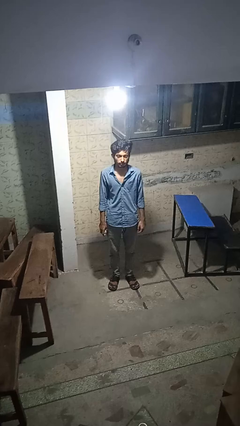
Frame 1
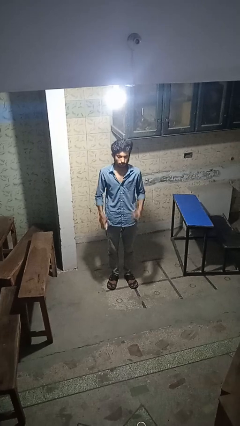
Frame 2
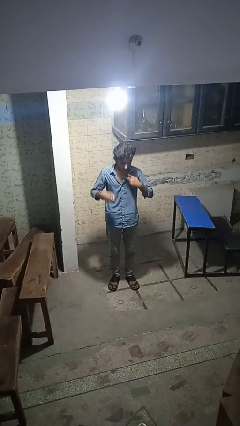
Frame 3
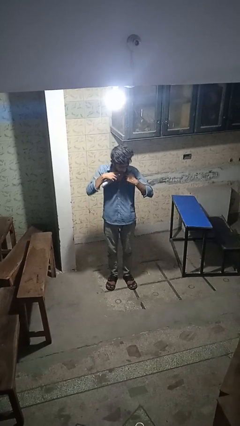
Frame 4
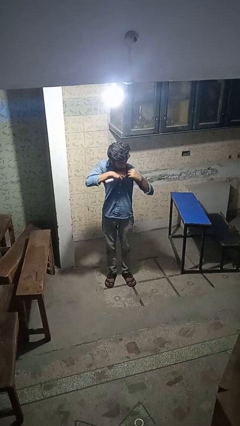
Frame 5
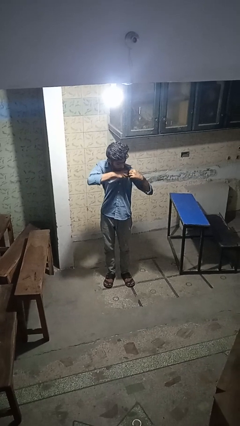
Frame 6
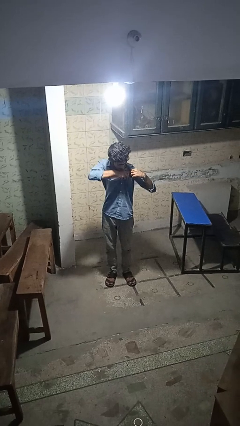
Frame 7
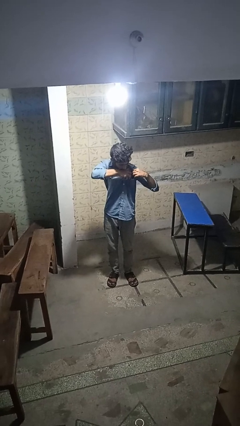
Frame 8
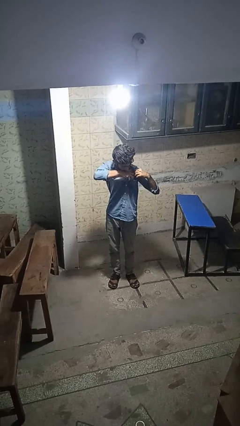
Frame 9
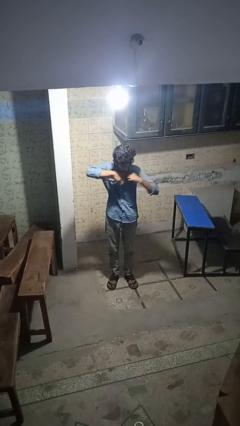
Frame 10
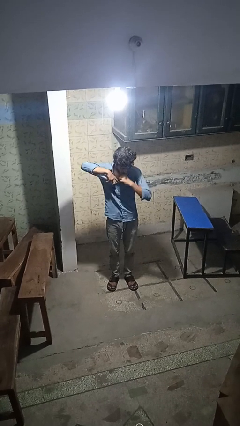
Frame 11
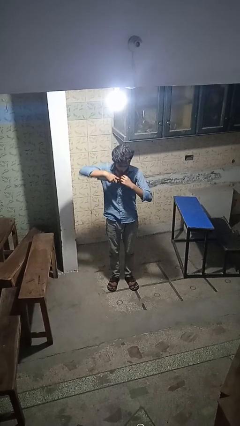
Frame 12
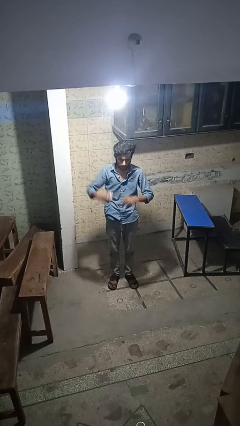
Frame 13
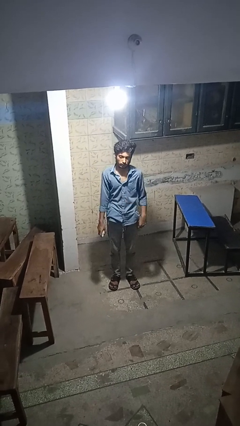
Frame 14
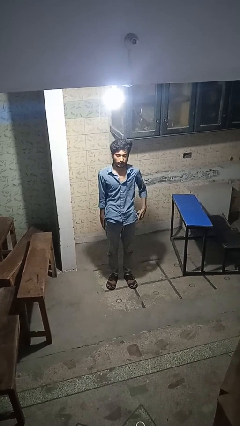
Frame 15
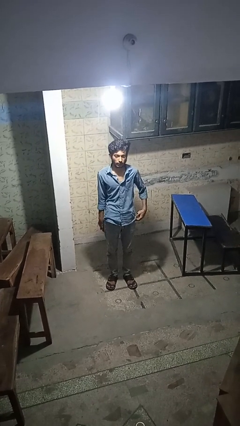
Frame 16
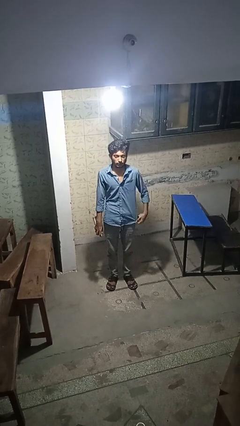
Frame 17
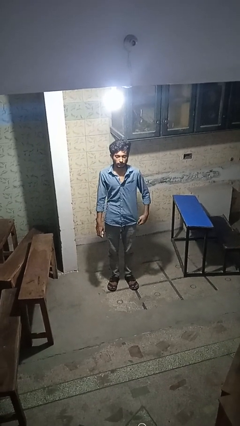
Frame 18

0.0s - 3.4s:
person applies deodorant

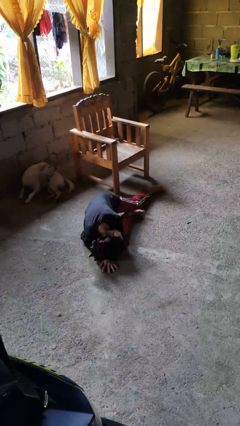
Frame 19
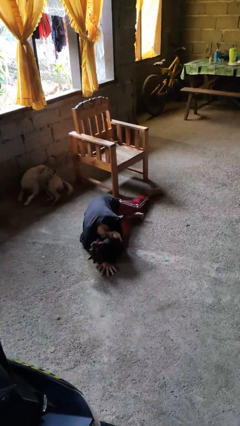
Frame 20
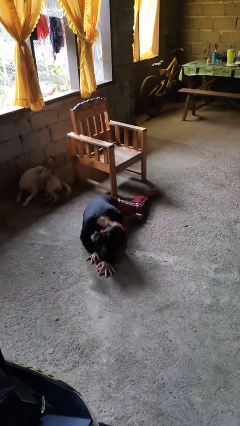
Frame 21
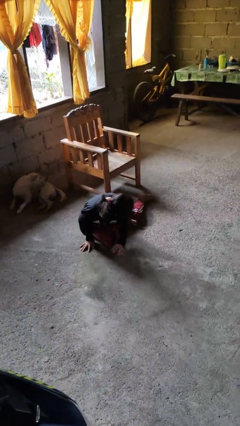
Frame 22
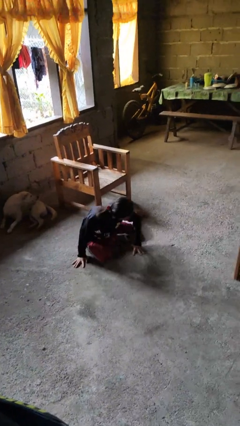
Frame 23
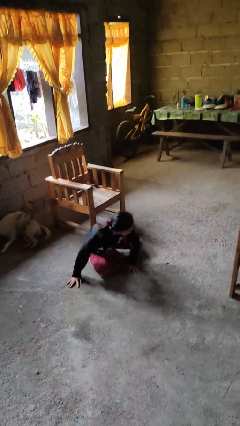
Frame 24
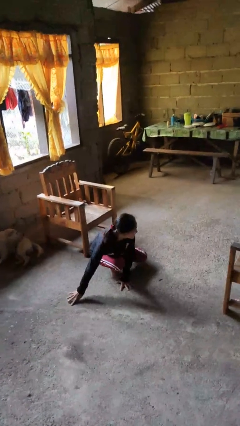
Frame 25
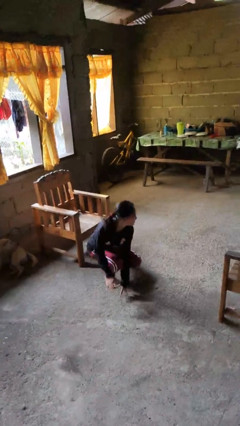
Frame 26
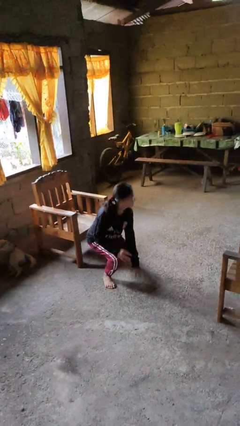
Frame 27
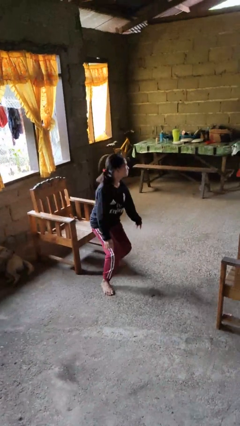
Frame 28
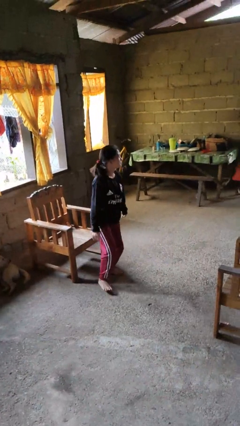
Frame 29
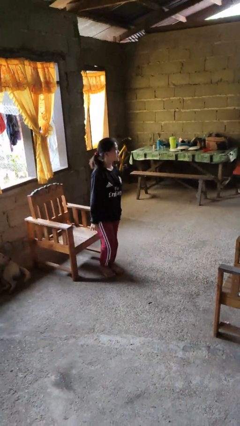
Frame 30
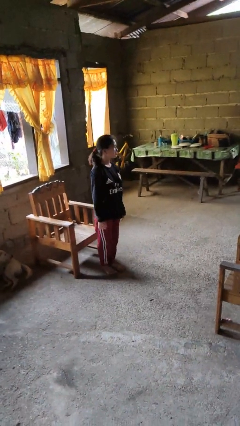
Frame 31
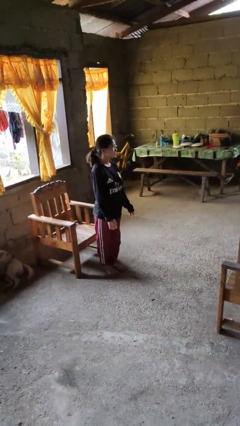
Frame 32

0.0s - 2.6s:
person stands up from floor

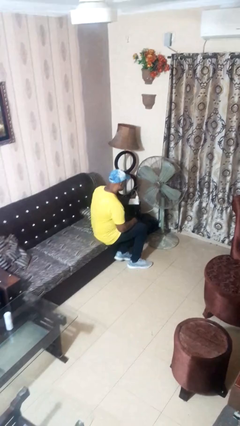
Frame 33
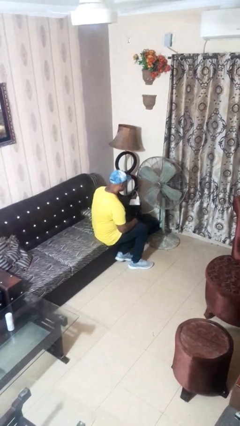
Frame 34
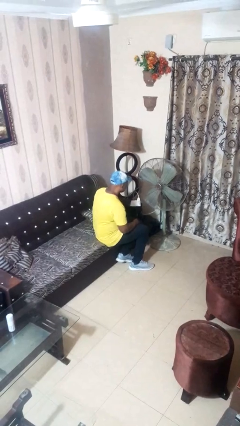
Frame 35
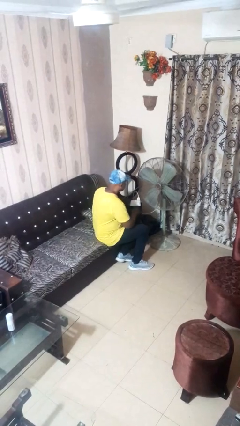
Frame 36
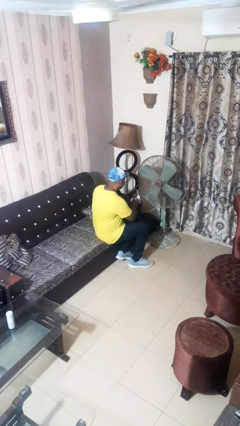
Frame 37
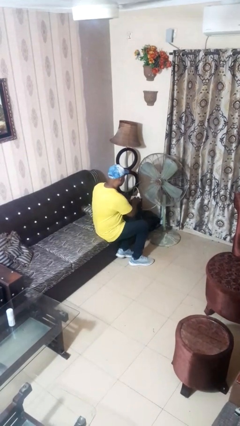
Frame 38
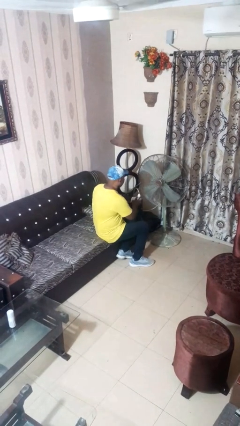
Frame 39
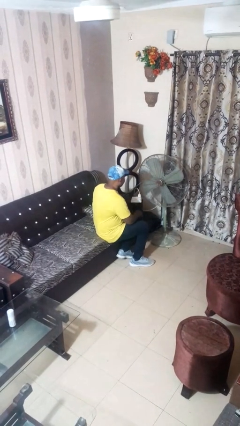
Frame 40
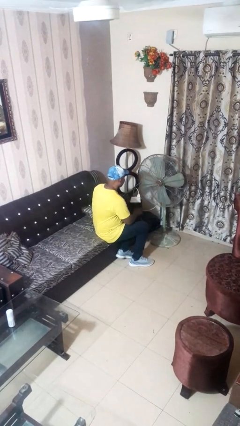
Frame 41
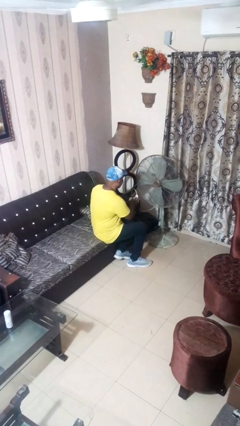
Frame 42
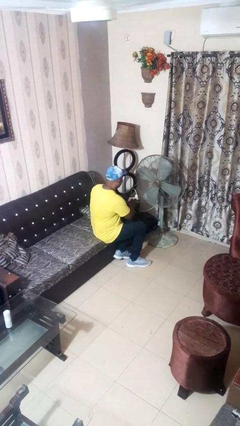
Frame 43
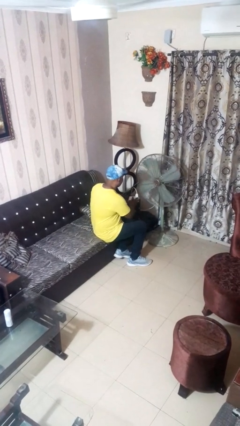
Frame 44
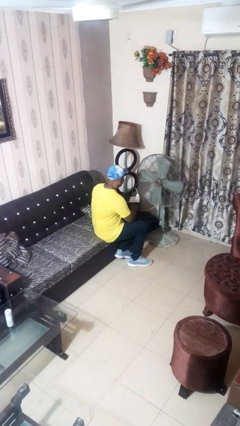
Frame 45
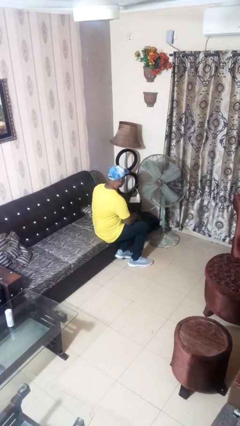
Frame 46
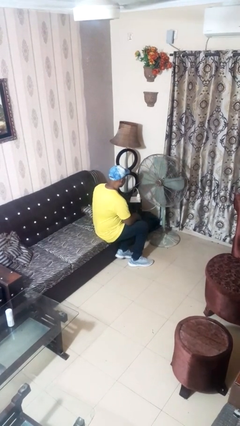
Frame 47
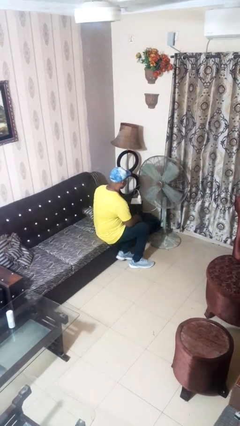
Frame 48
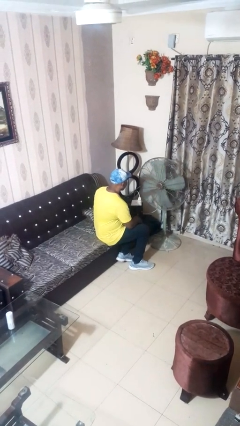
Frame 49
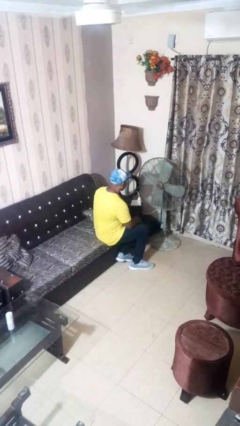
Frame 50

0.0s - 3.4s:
person turns on fan

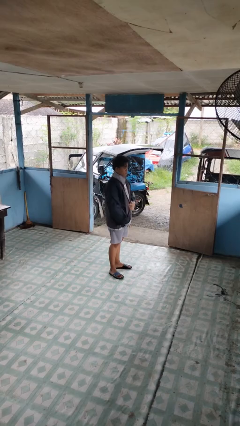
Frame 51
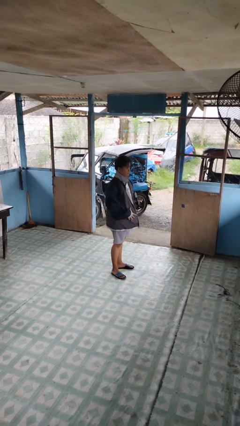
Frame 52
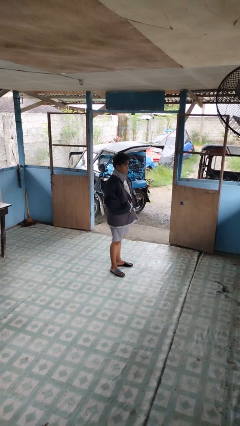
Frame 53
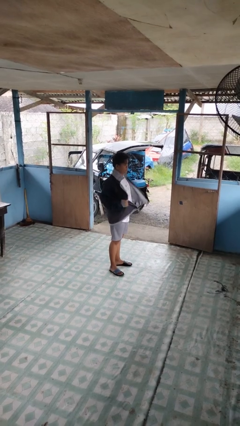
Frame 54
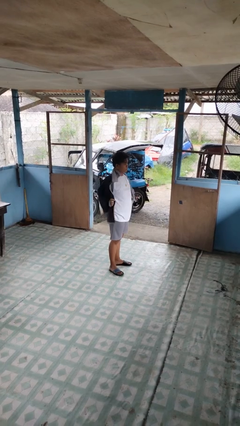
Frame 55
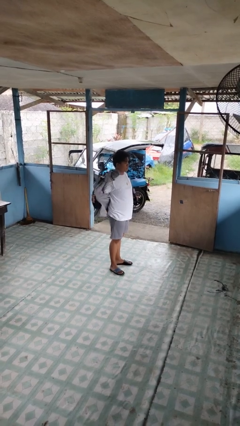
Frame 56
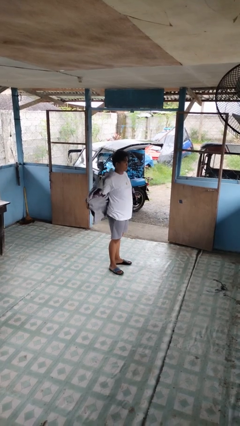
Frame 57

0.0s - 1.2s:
person unzips jacket

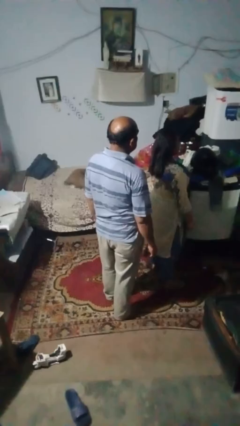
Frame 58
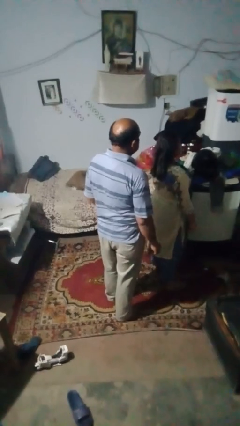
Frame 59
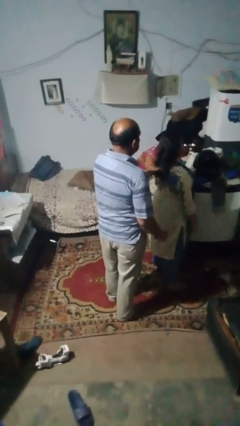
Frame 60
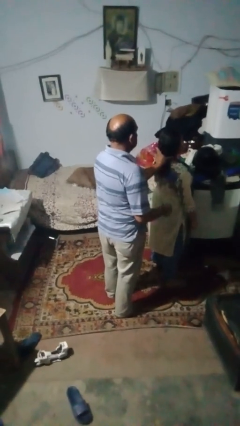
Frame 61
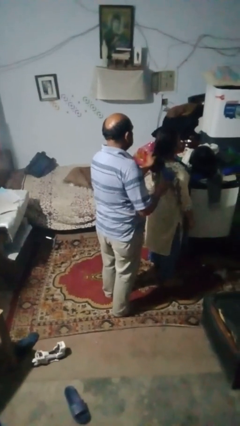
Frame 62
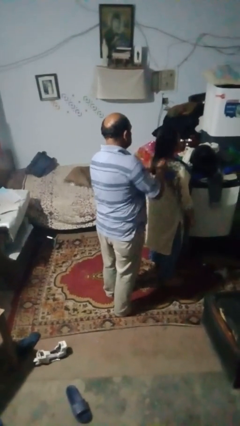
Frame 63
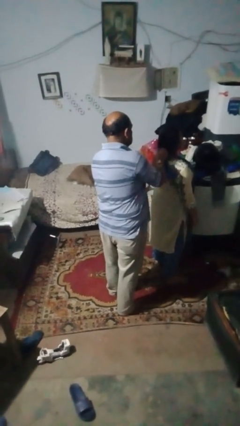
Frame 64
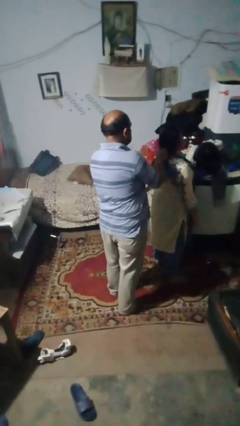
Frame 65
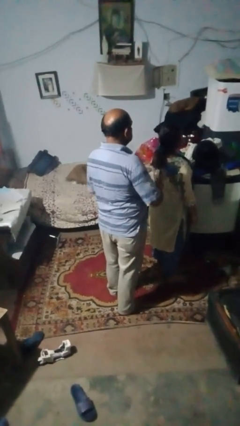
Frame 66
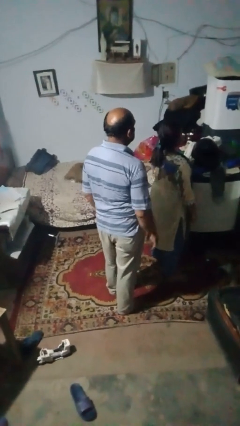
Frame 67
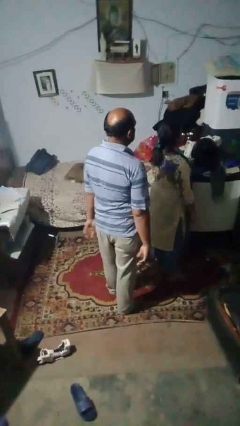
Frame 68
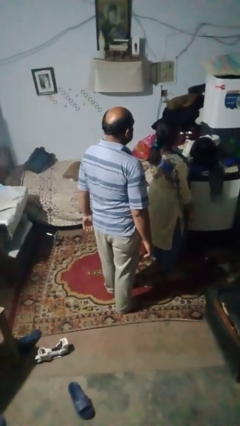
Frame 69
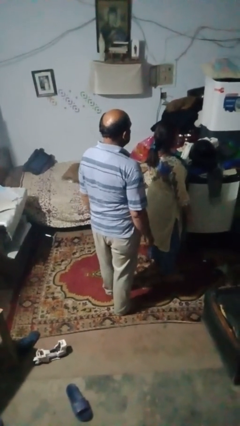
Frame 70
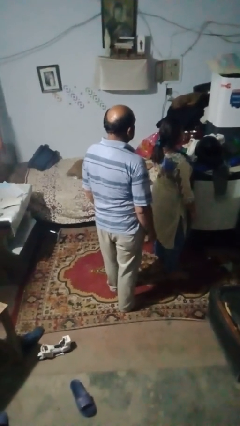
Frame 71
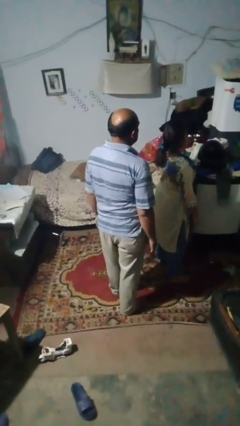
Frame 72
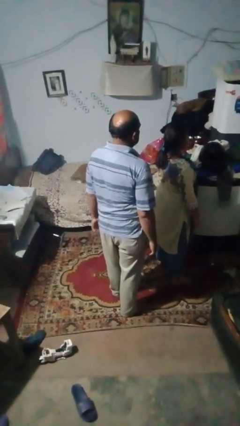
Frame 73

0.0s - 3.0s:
person braids hair of person

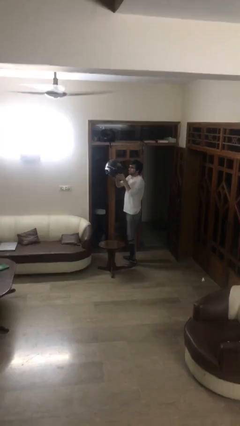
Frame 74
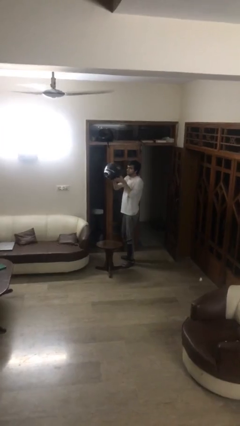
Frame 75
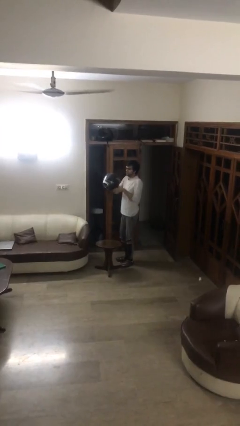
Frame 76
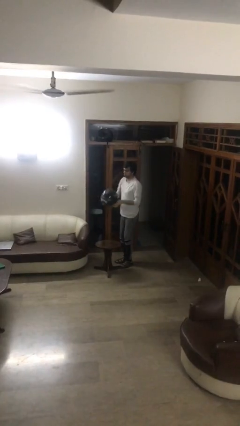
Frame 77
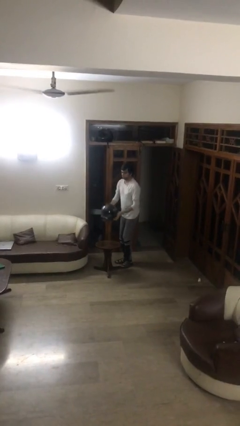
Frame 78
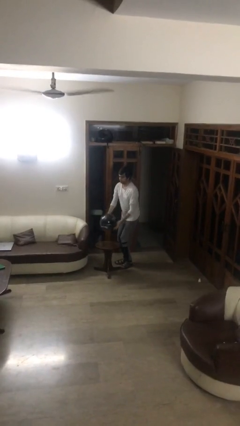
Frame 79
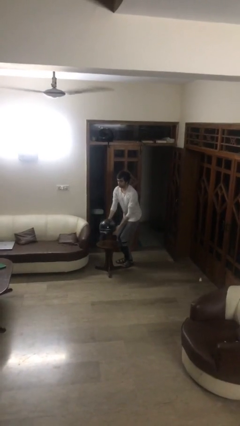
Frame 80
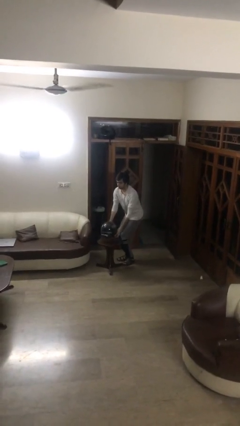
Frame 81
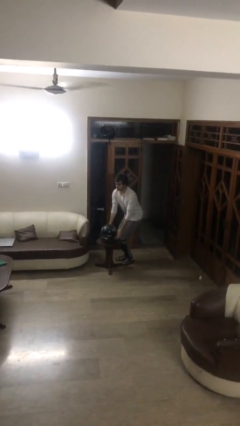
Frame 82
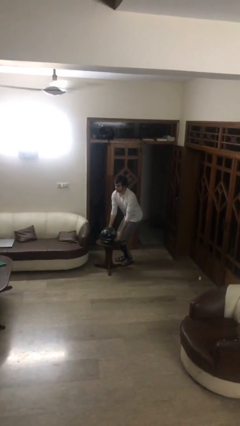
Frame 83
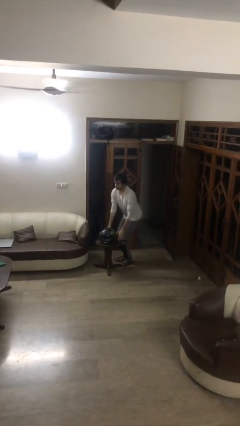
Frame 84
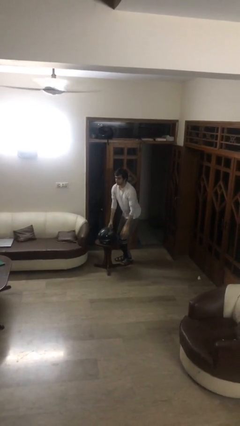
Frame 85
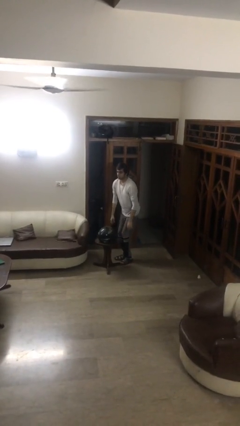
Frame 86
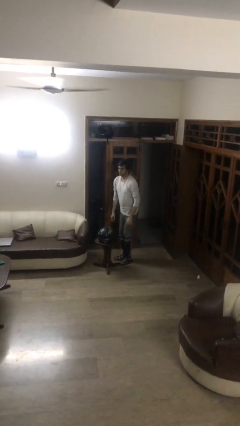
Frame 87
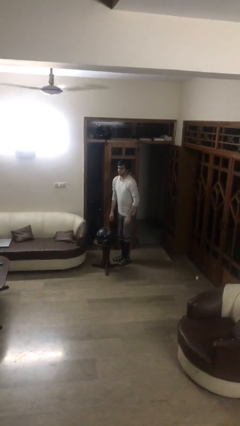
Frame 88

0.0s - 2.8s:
person puts down object on table

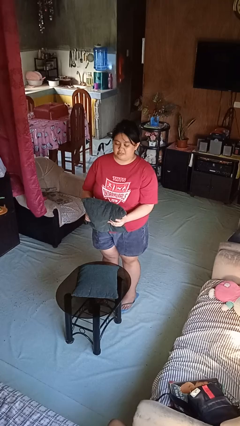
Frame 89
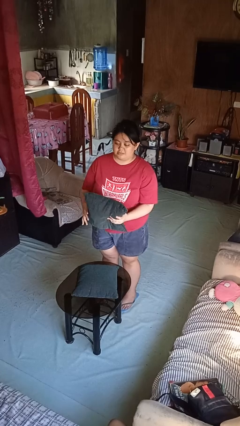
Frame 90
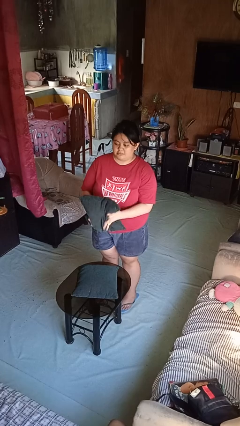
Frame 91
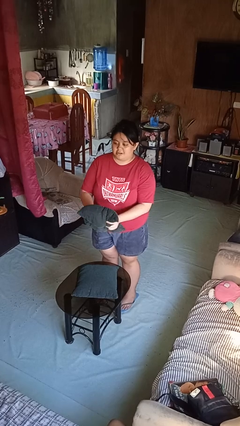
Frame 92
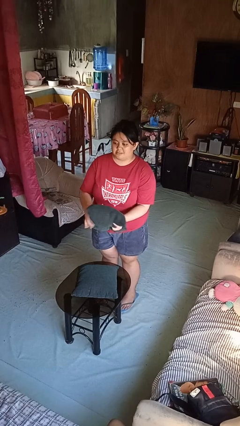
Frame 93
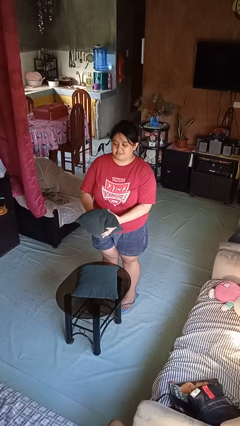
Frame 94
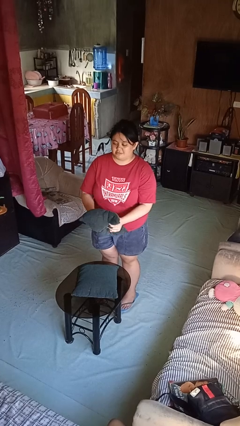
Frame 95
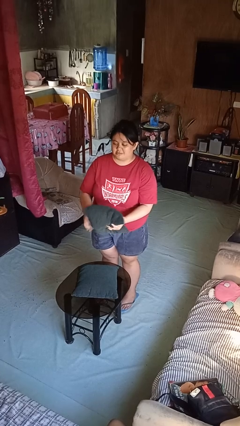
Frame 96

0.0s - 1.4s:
person squeezes object
